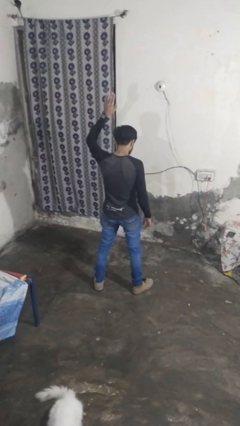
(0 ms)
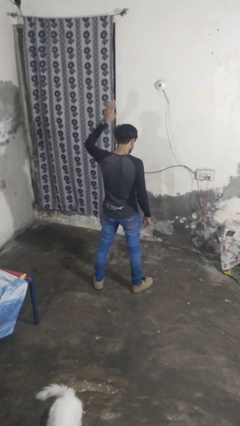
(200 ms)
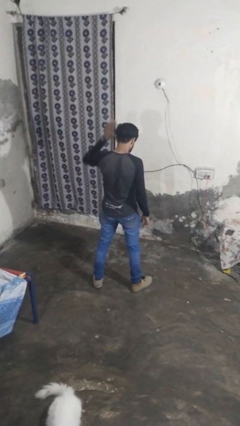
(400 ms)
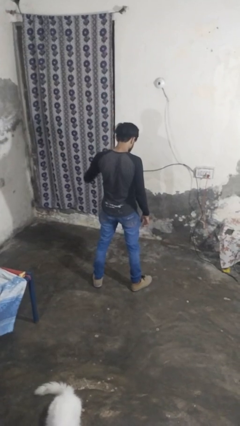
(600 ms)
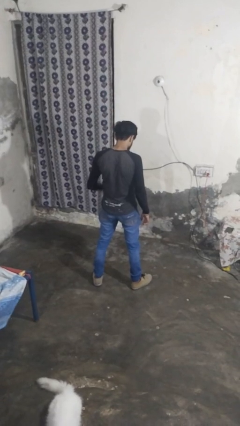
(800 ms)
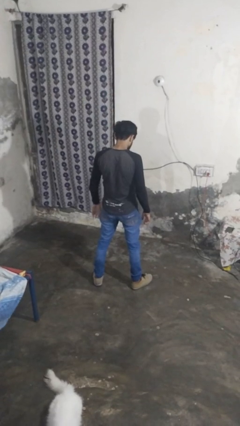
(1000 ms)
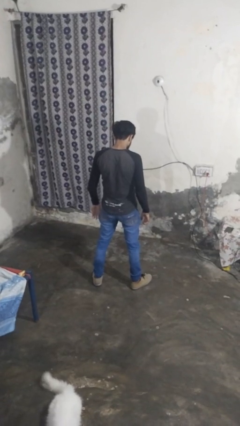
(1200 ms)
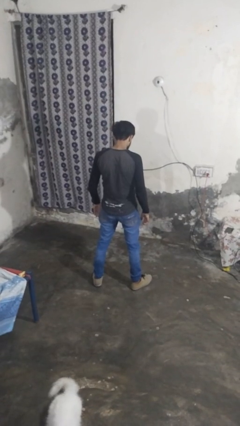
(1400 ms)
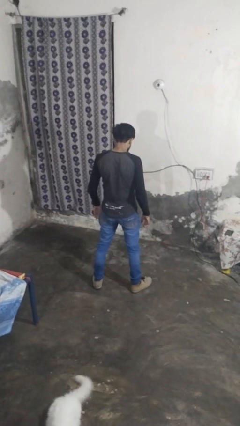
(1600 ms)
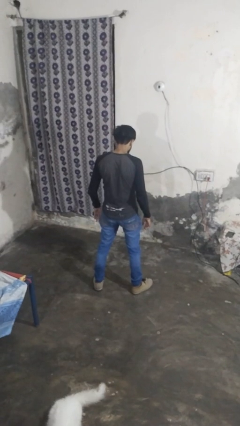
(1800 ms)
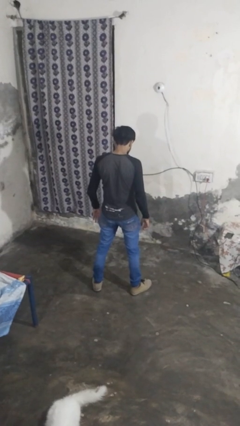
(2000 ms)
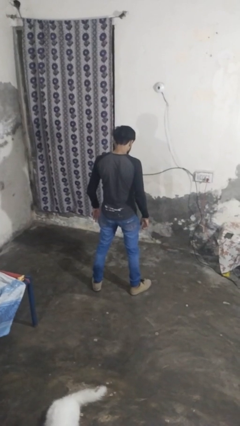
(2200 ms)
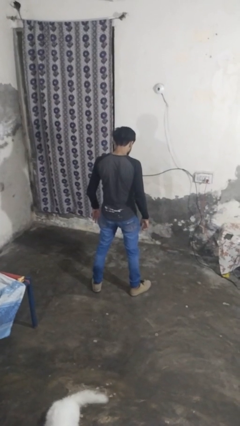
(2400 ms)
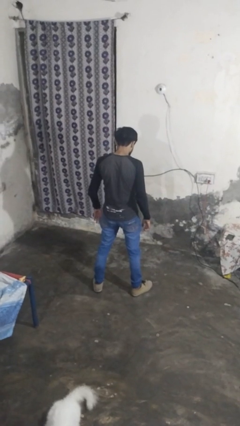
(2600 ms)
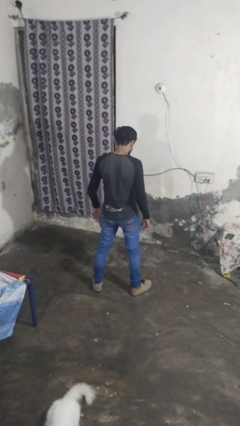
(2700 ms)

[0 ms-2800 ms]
person gestures lower hand

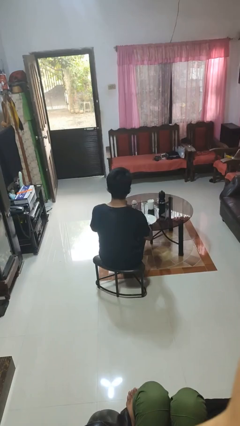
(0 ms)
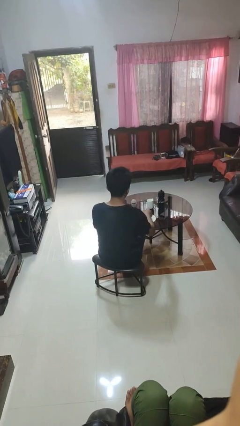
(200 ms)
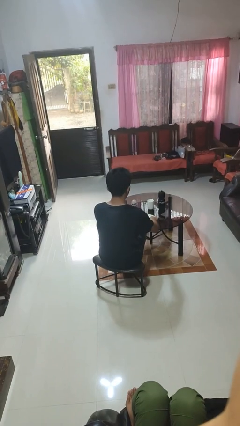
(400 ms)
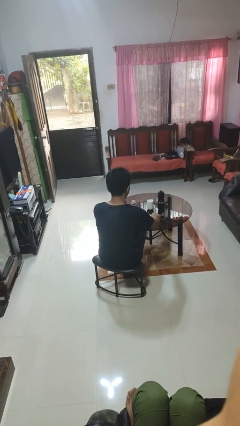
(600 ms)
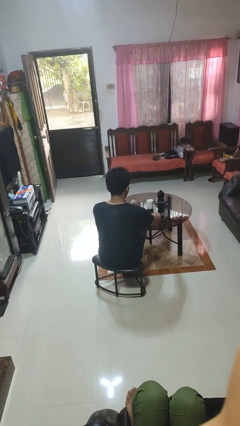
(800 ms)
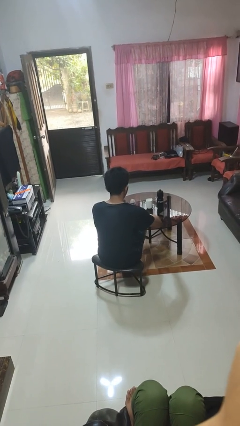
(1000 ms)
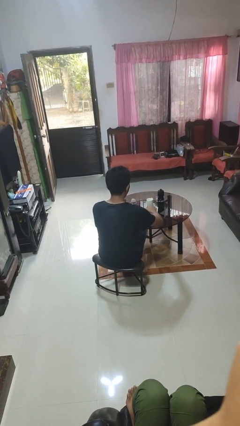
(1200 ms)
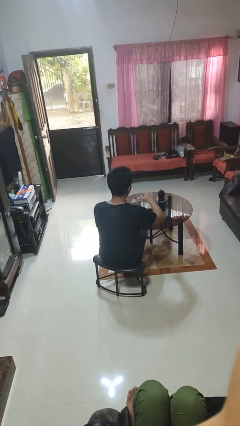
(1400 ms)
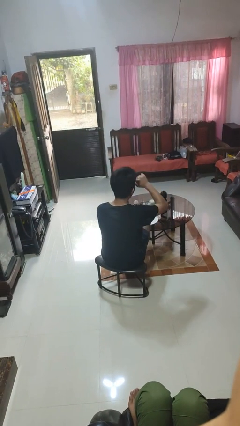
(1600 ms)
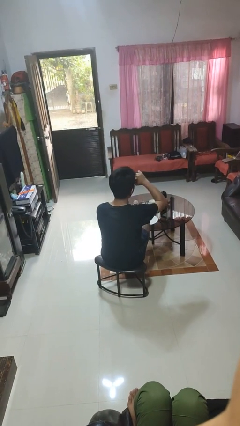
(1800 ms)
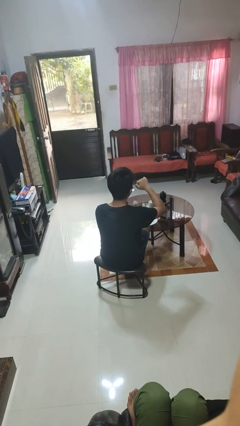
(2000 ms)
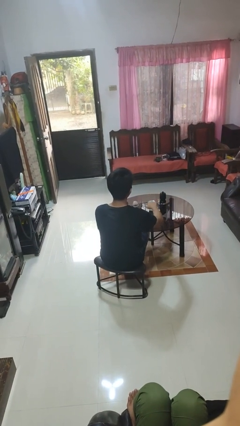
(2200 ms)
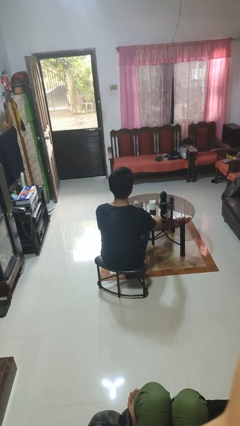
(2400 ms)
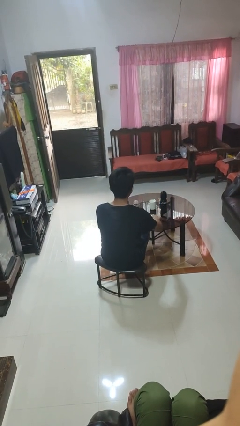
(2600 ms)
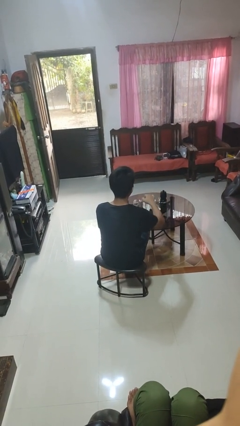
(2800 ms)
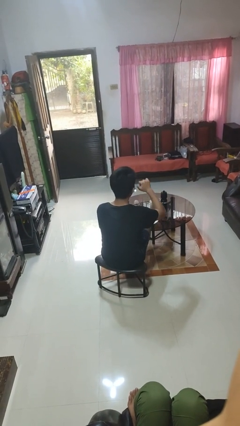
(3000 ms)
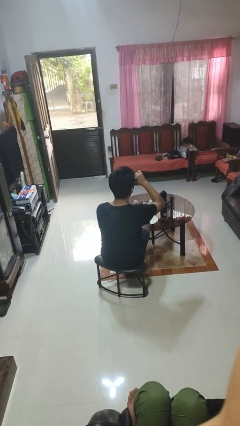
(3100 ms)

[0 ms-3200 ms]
person eats with utensil

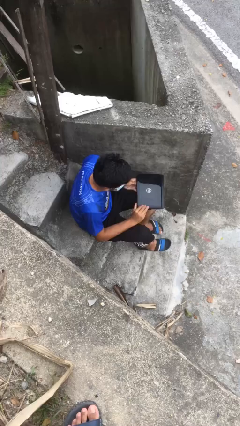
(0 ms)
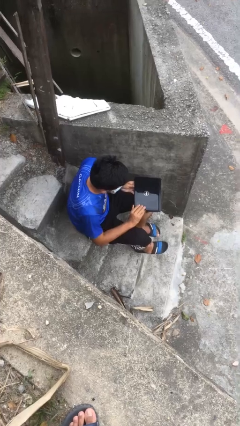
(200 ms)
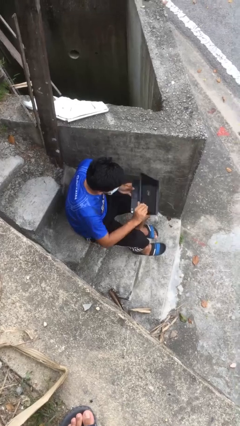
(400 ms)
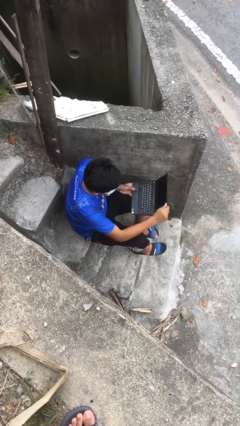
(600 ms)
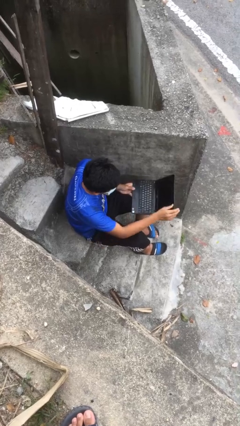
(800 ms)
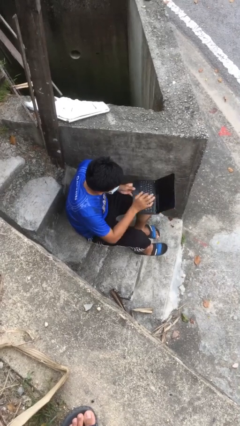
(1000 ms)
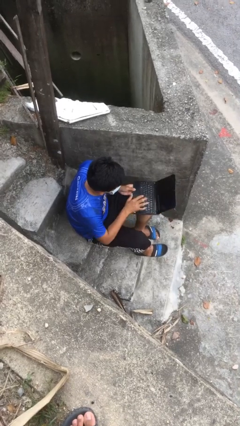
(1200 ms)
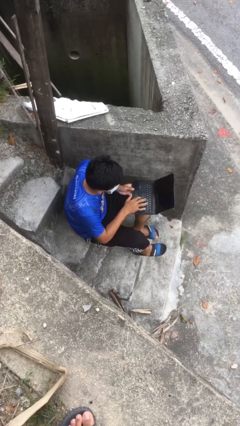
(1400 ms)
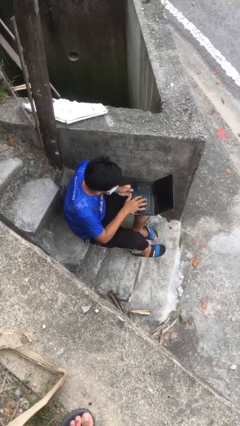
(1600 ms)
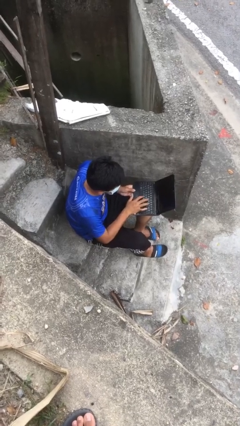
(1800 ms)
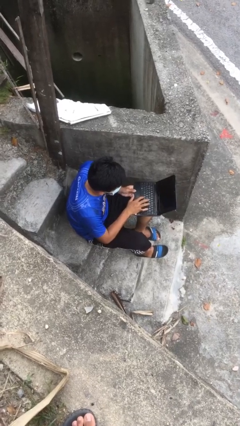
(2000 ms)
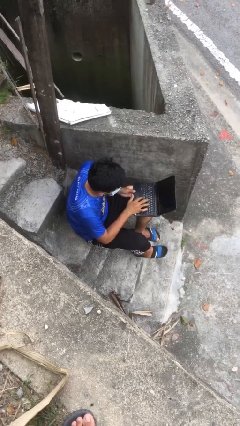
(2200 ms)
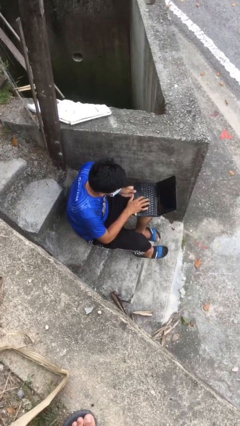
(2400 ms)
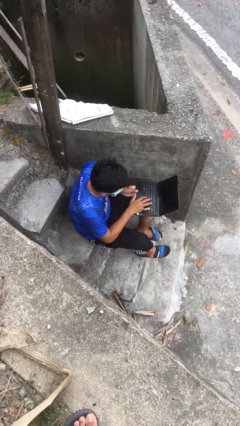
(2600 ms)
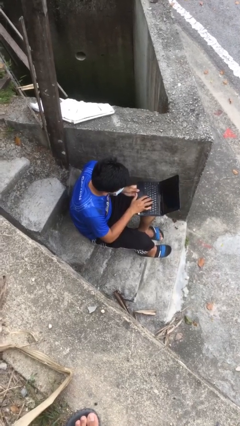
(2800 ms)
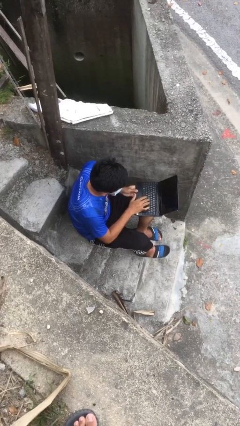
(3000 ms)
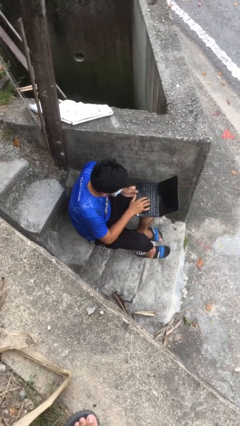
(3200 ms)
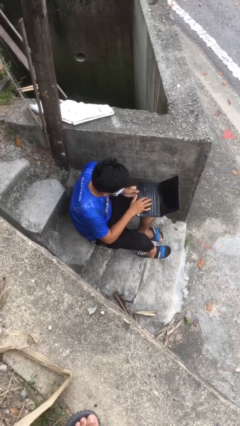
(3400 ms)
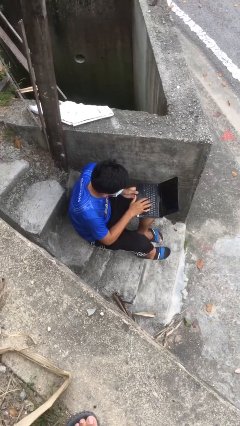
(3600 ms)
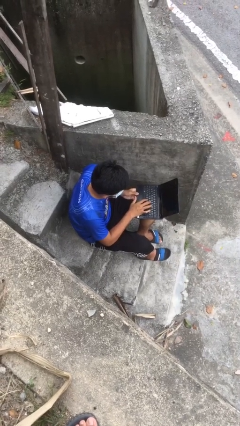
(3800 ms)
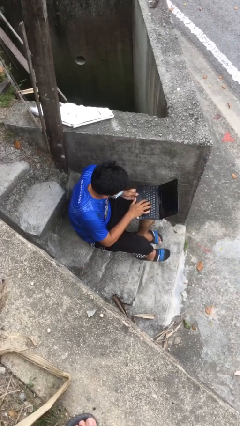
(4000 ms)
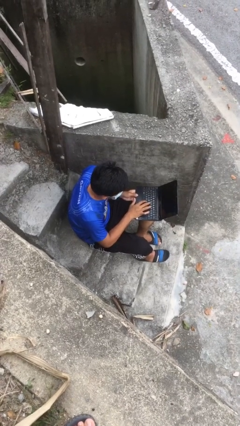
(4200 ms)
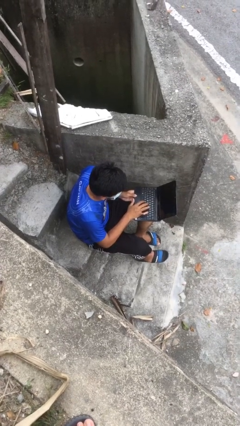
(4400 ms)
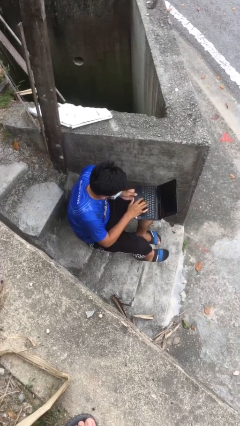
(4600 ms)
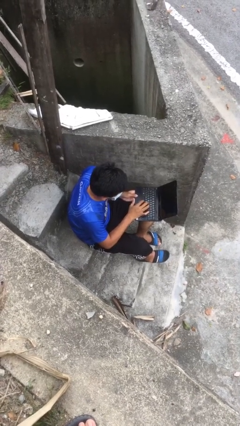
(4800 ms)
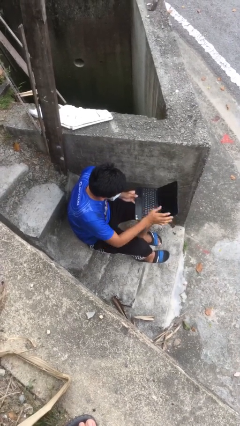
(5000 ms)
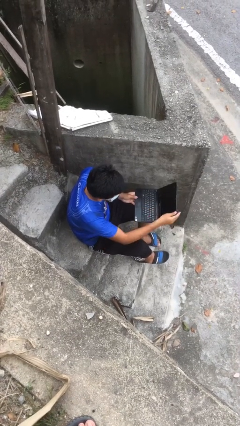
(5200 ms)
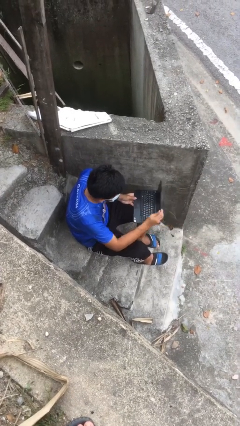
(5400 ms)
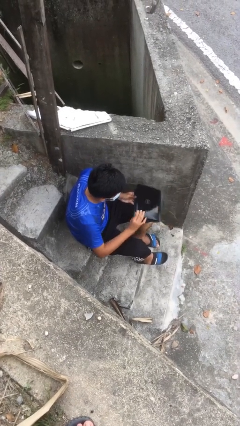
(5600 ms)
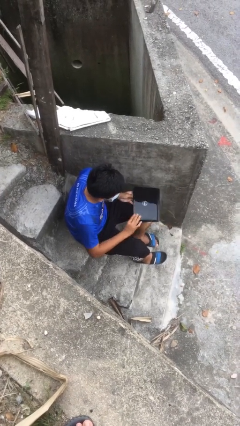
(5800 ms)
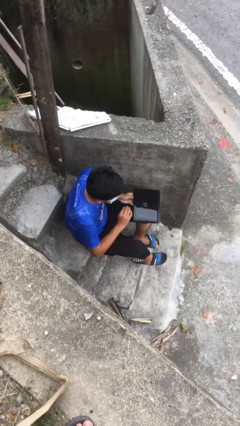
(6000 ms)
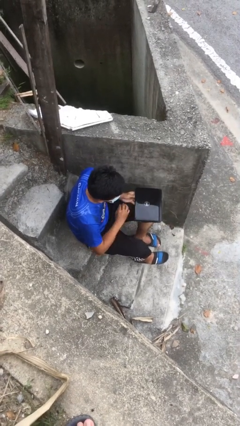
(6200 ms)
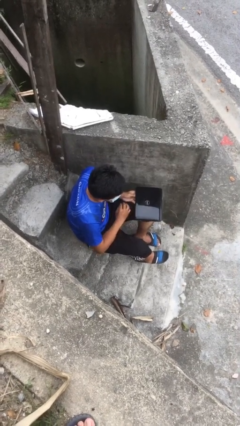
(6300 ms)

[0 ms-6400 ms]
person interacts with laptop

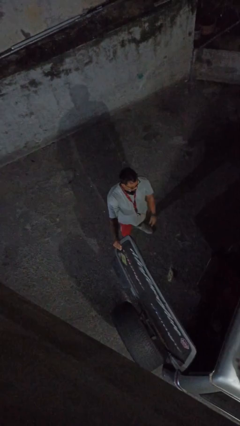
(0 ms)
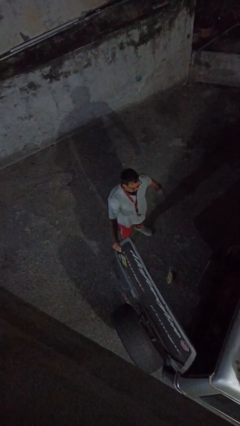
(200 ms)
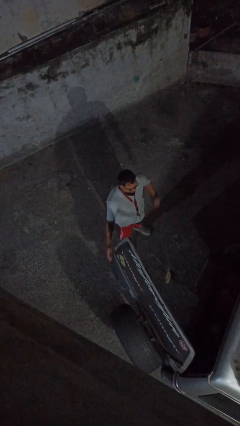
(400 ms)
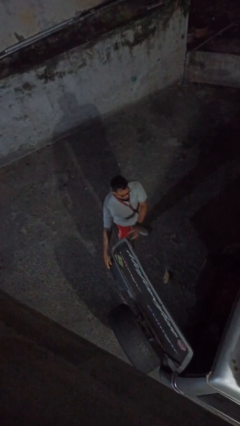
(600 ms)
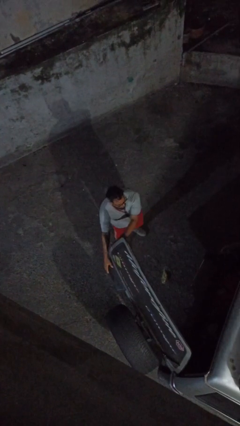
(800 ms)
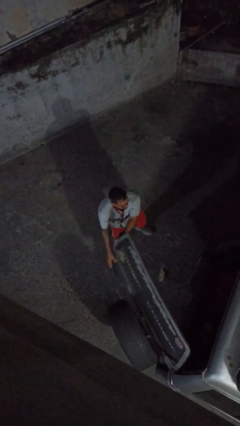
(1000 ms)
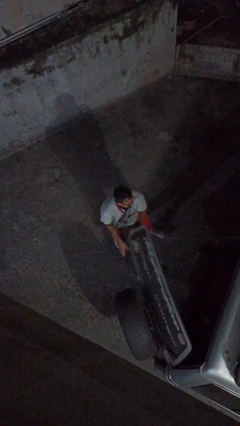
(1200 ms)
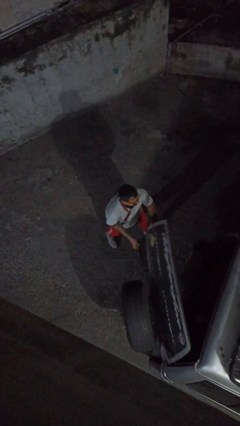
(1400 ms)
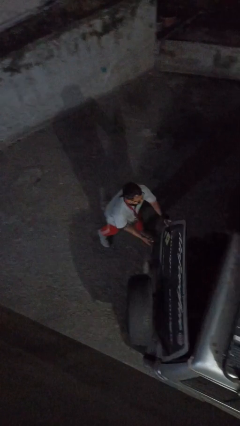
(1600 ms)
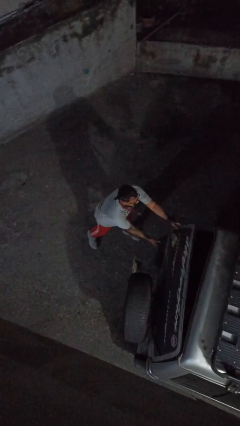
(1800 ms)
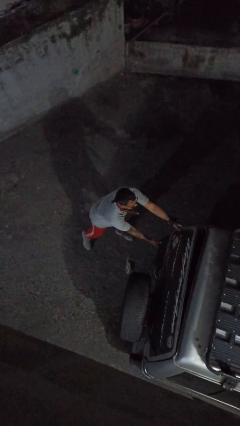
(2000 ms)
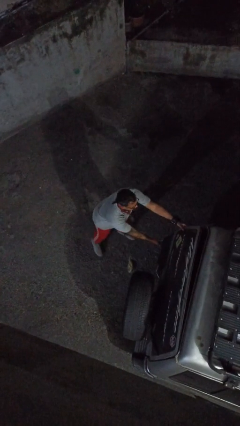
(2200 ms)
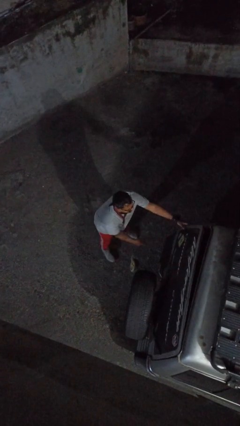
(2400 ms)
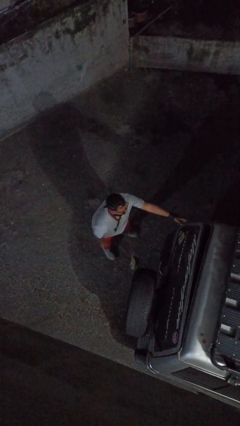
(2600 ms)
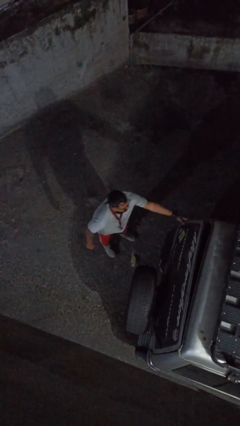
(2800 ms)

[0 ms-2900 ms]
person closes car trunk

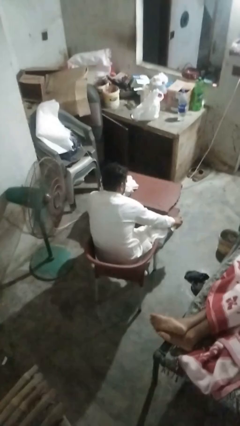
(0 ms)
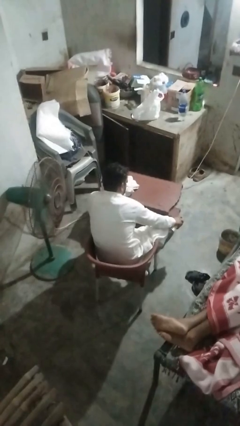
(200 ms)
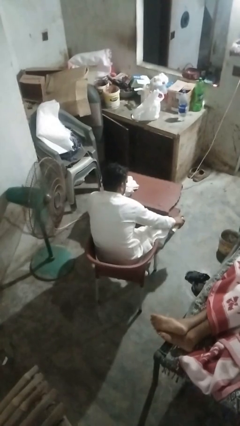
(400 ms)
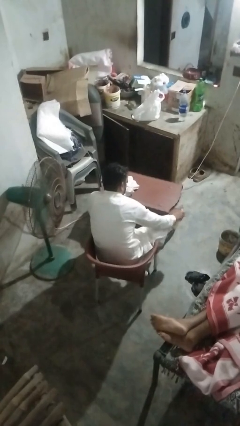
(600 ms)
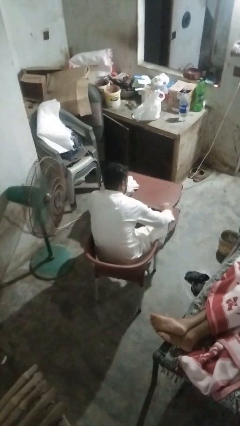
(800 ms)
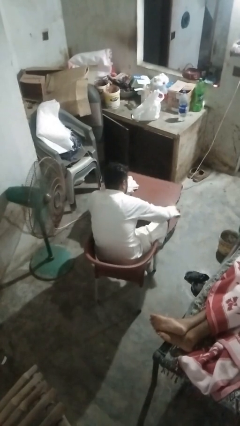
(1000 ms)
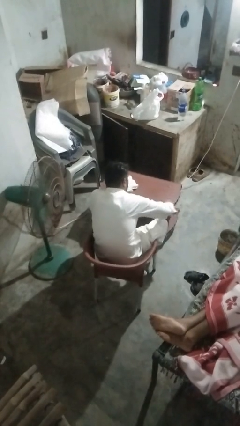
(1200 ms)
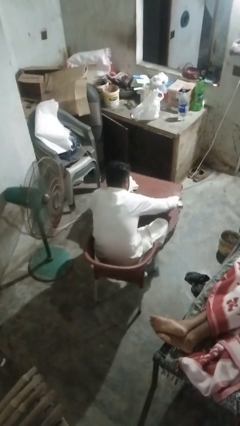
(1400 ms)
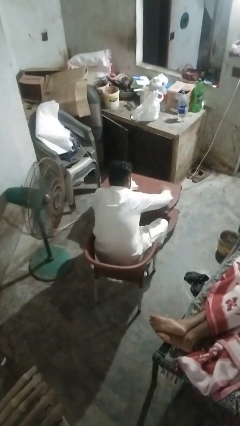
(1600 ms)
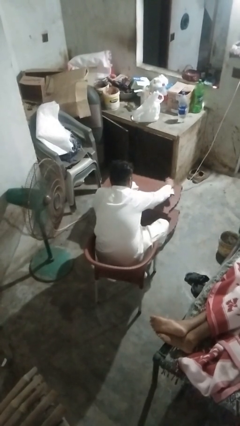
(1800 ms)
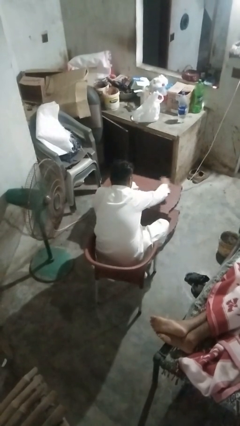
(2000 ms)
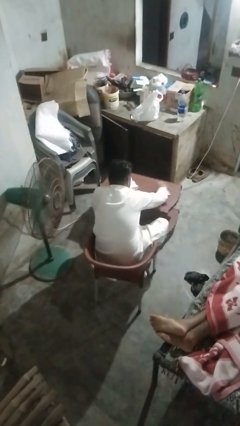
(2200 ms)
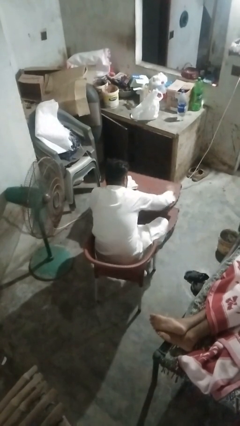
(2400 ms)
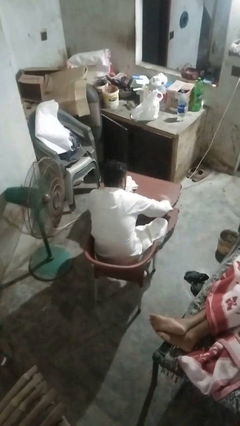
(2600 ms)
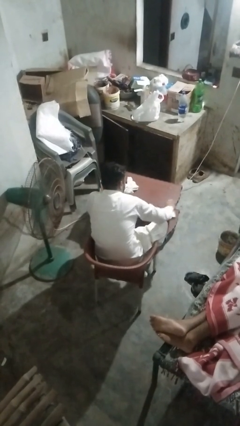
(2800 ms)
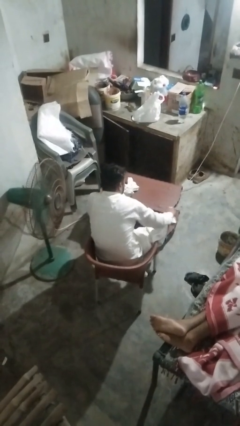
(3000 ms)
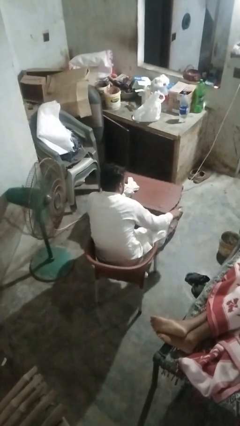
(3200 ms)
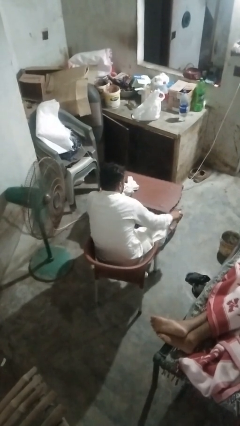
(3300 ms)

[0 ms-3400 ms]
person sprays from bottle
